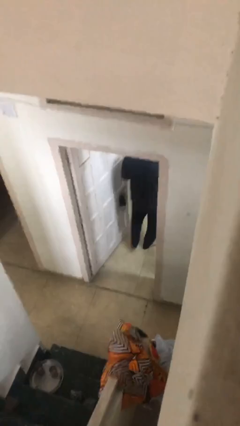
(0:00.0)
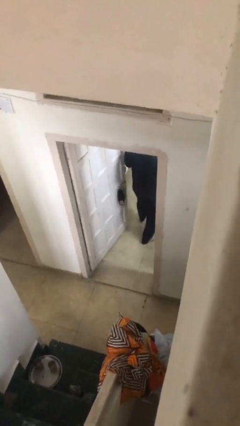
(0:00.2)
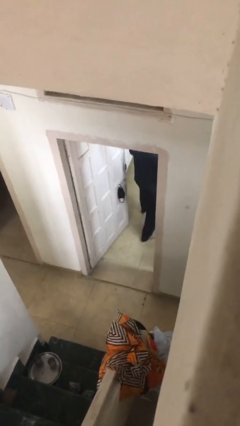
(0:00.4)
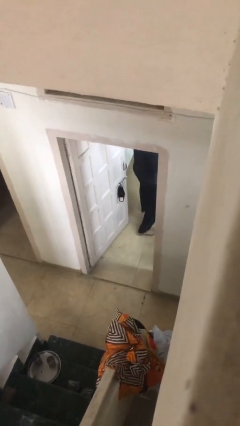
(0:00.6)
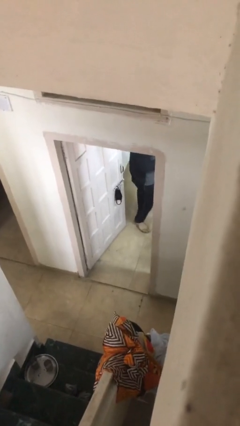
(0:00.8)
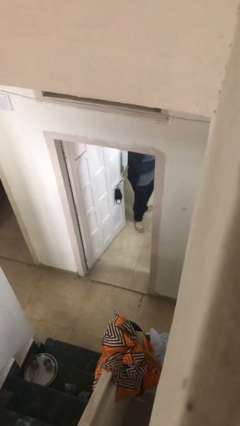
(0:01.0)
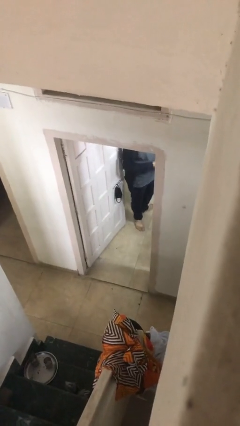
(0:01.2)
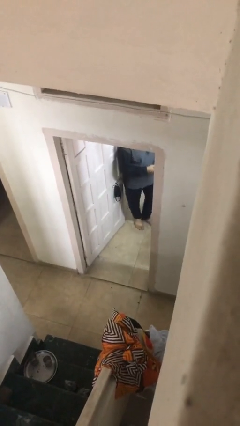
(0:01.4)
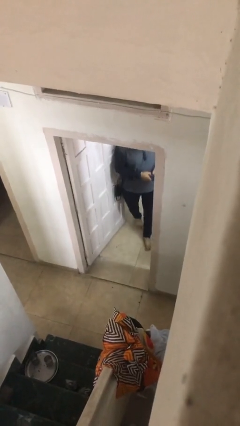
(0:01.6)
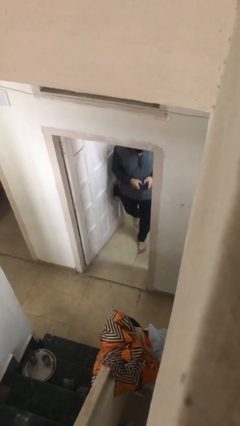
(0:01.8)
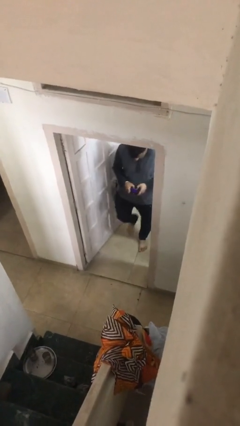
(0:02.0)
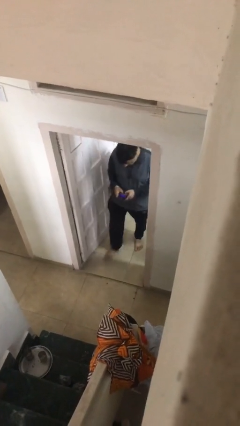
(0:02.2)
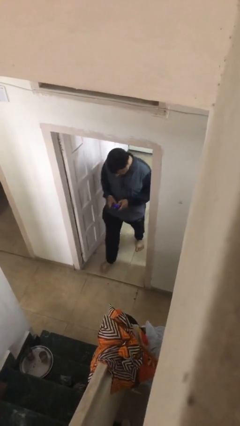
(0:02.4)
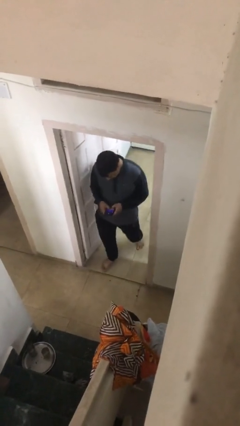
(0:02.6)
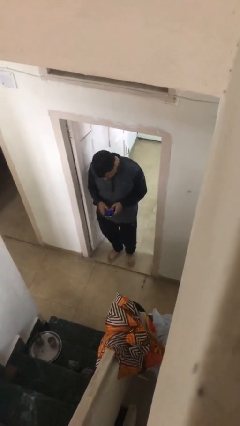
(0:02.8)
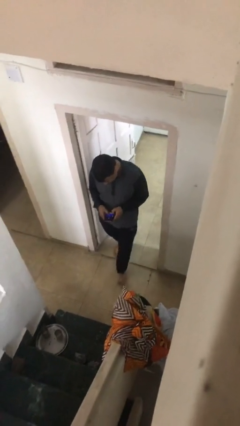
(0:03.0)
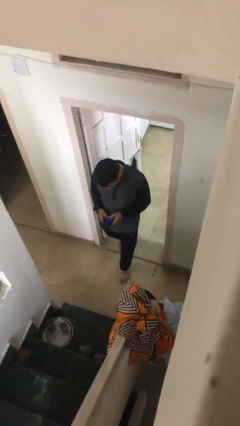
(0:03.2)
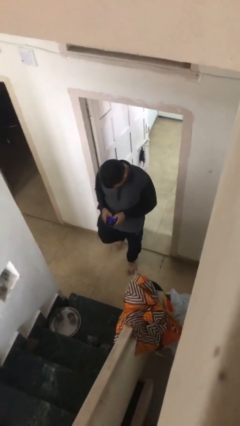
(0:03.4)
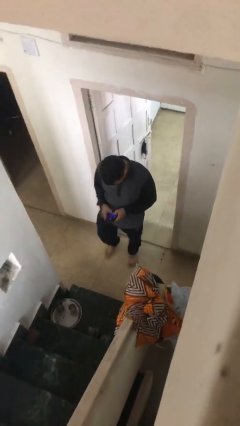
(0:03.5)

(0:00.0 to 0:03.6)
person enters scene through structure

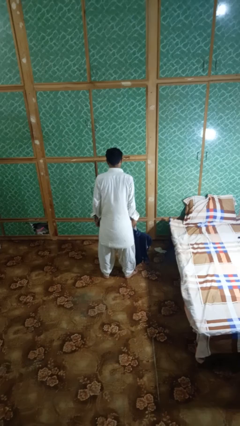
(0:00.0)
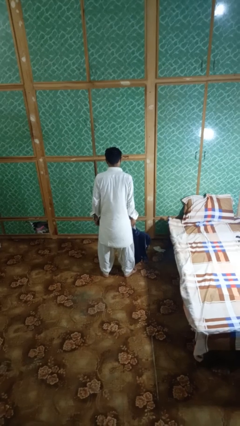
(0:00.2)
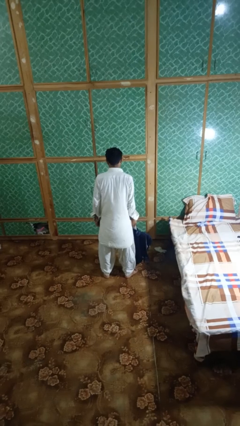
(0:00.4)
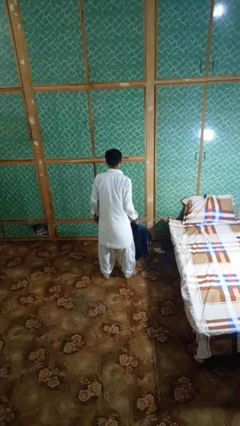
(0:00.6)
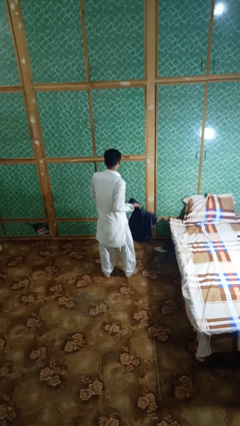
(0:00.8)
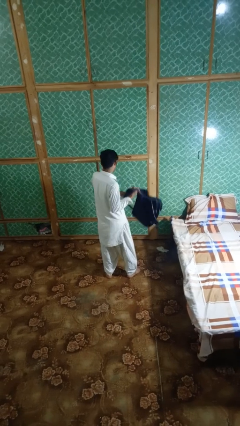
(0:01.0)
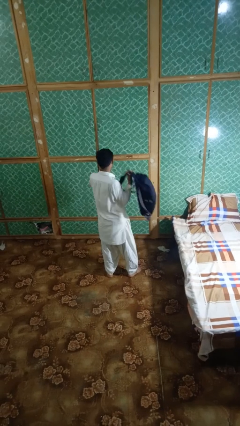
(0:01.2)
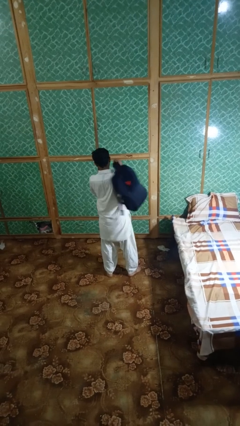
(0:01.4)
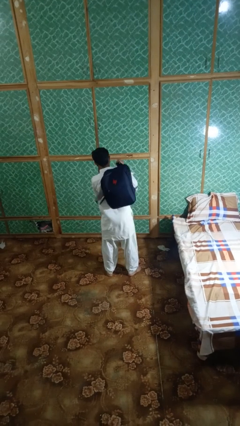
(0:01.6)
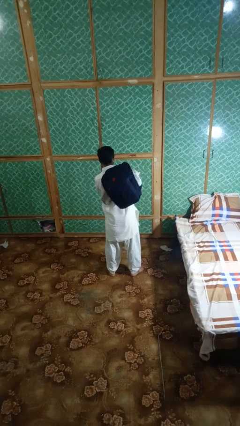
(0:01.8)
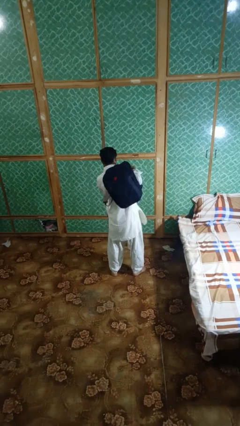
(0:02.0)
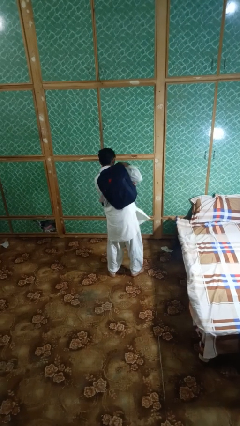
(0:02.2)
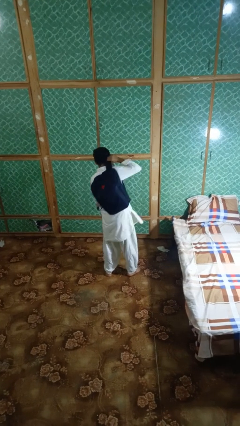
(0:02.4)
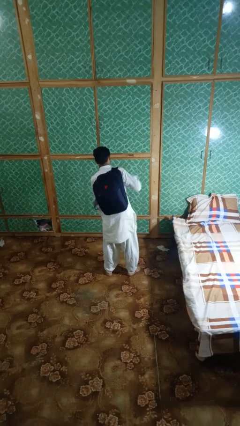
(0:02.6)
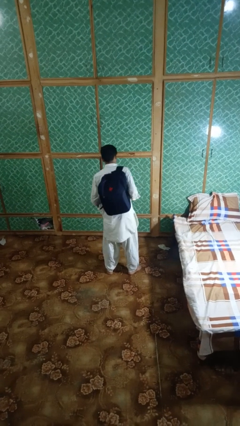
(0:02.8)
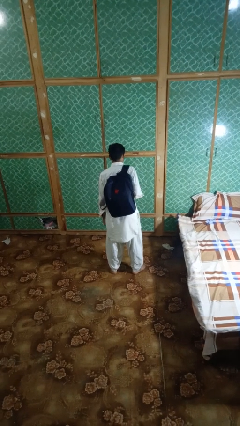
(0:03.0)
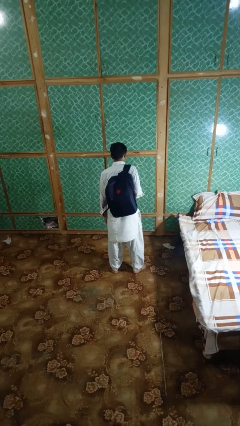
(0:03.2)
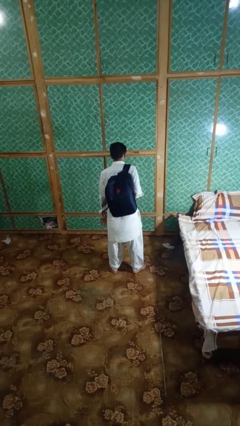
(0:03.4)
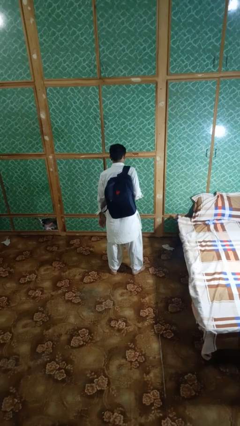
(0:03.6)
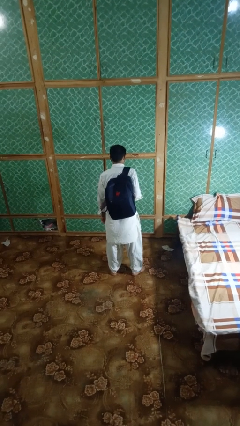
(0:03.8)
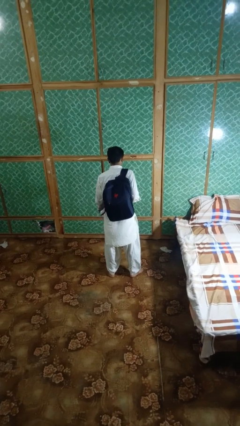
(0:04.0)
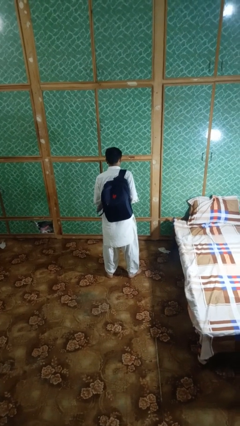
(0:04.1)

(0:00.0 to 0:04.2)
person puts on backpack

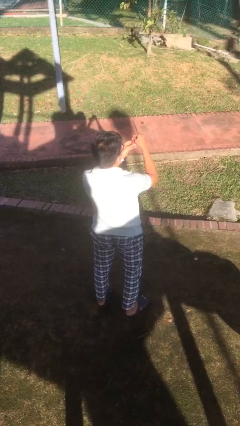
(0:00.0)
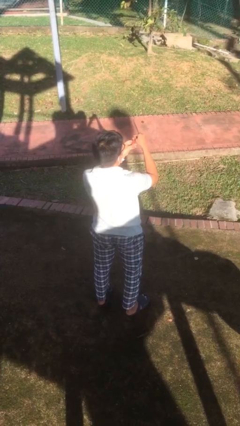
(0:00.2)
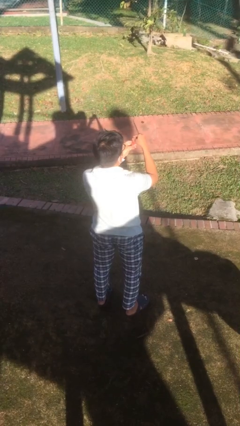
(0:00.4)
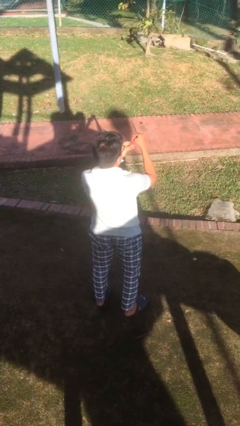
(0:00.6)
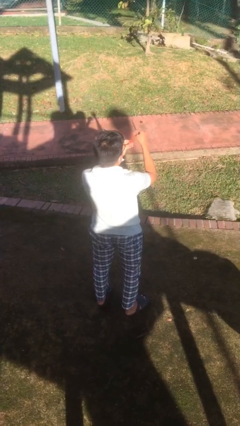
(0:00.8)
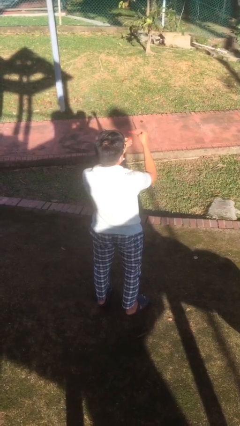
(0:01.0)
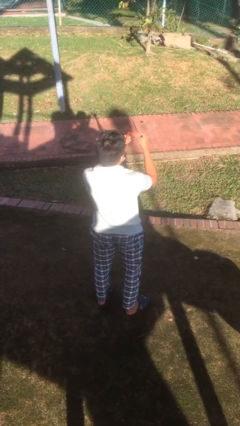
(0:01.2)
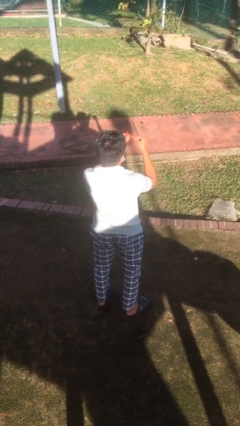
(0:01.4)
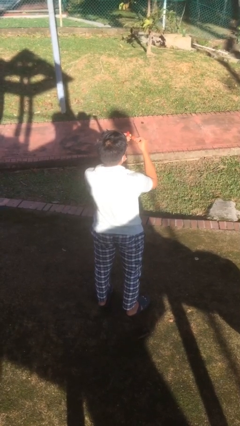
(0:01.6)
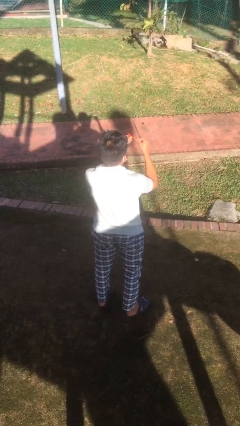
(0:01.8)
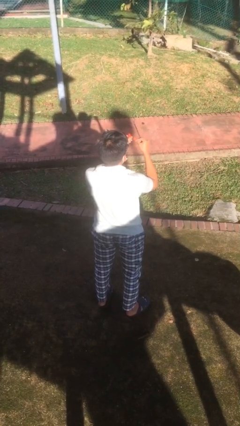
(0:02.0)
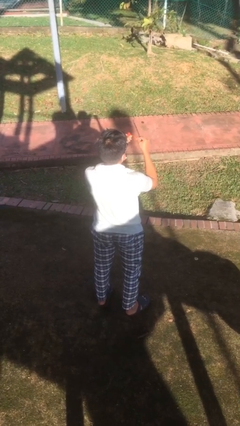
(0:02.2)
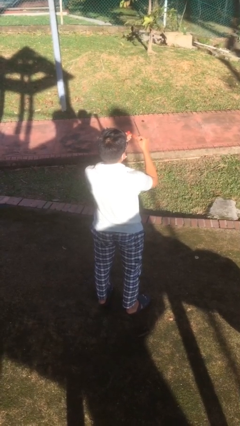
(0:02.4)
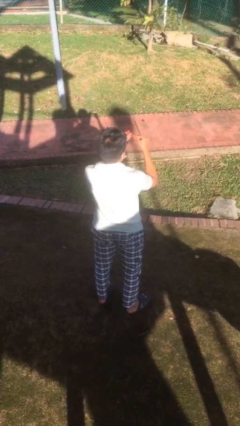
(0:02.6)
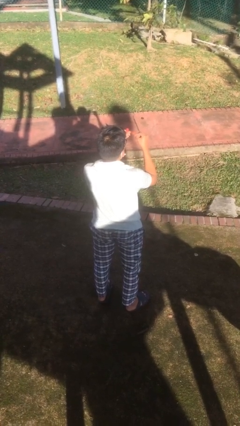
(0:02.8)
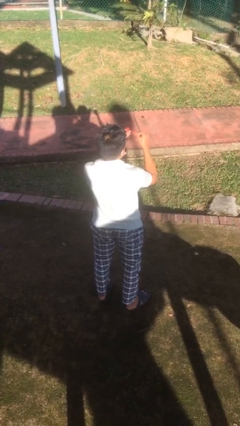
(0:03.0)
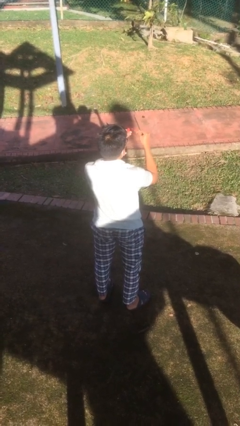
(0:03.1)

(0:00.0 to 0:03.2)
person paints fingernails

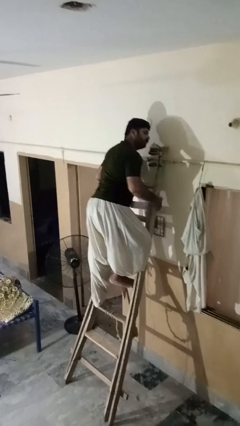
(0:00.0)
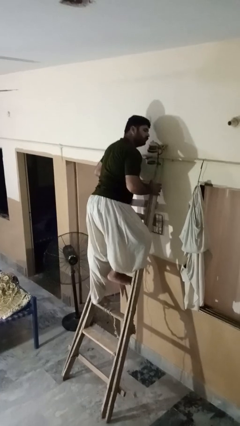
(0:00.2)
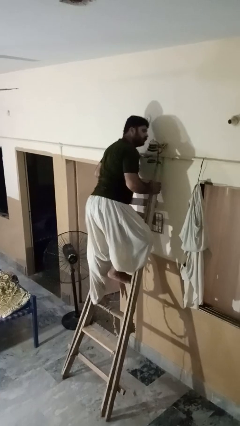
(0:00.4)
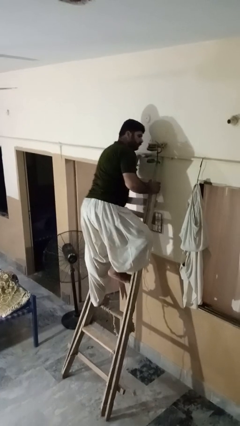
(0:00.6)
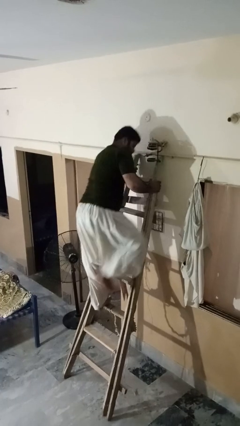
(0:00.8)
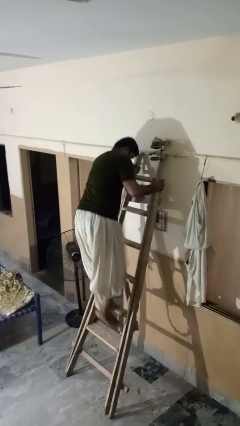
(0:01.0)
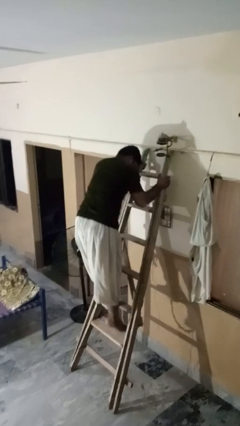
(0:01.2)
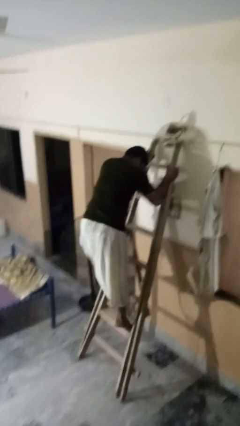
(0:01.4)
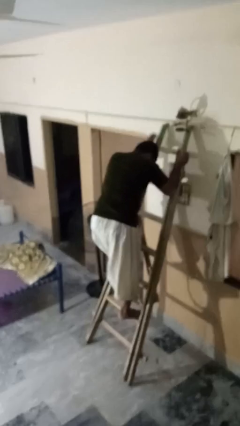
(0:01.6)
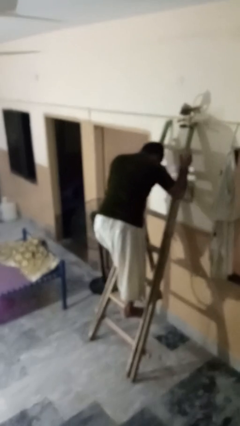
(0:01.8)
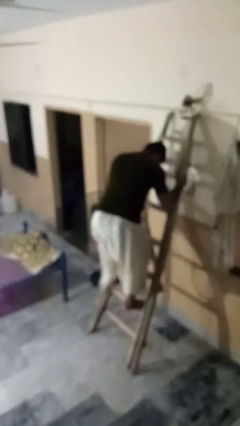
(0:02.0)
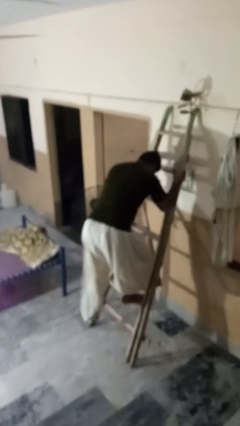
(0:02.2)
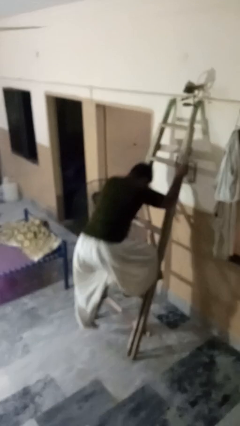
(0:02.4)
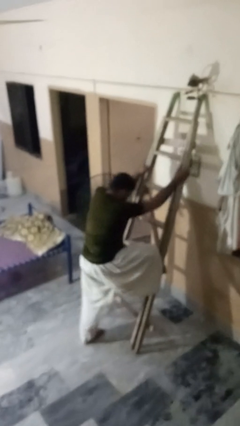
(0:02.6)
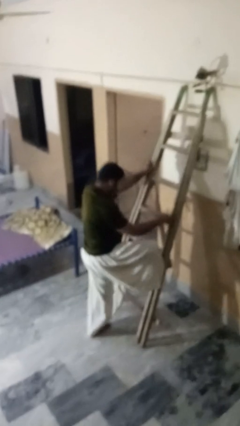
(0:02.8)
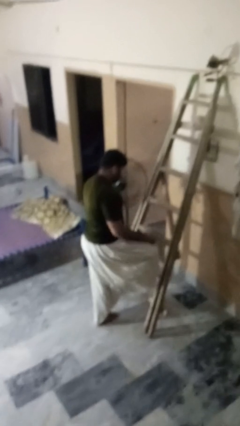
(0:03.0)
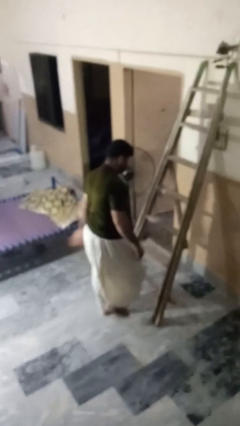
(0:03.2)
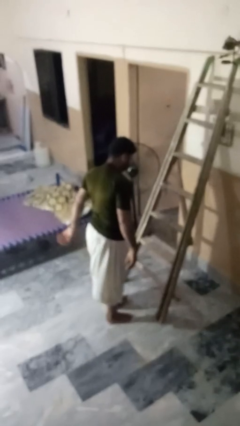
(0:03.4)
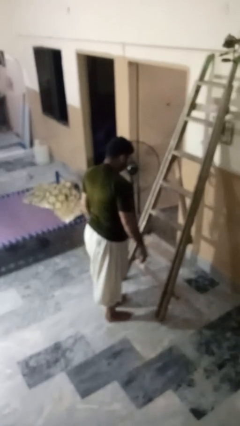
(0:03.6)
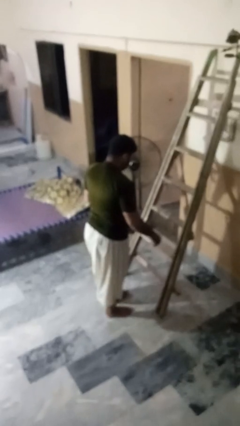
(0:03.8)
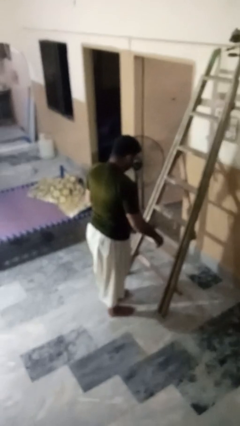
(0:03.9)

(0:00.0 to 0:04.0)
person climbs down ladder

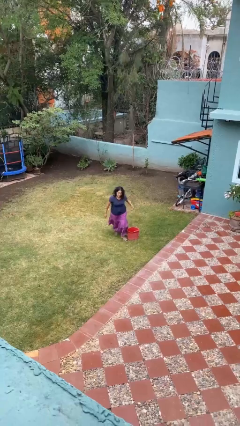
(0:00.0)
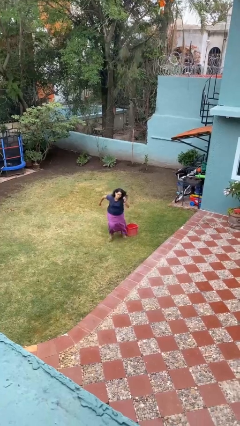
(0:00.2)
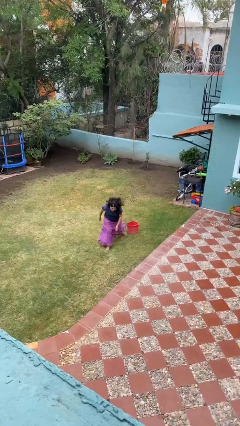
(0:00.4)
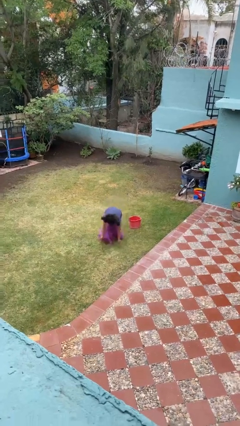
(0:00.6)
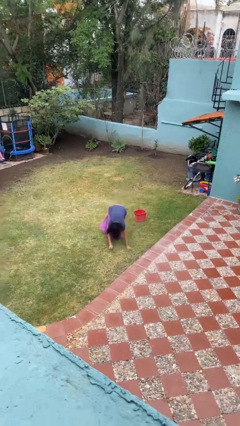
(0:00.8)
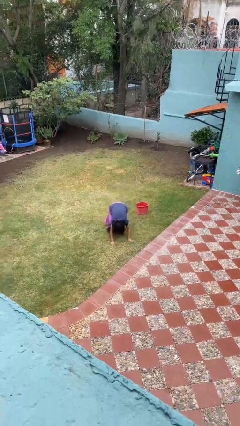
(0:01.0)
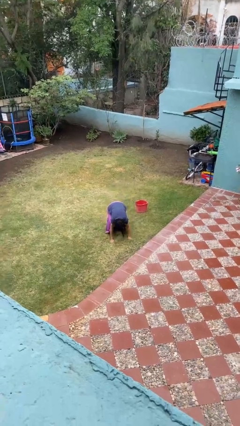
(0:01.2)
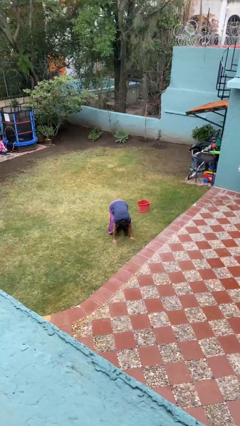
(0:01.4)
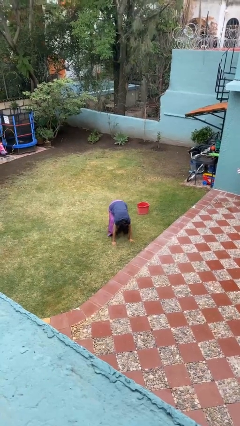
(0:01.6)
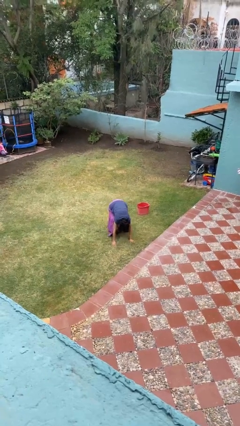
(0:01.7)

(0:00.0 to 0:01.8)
person trips on object on floor

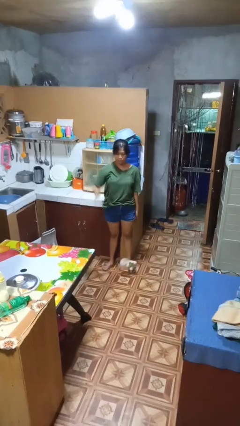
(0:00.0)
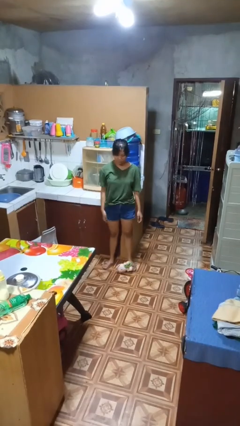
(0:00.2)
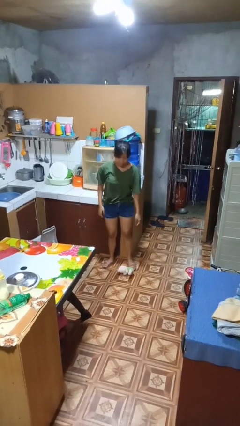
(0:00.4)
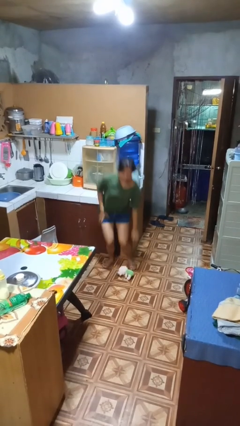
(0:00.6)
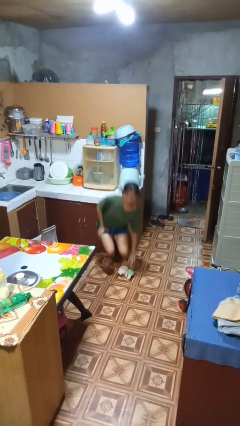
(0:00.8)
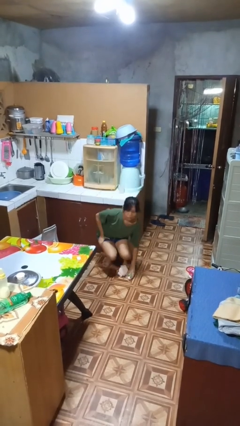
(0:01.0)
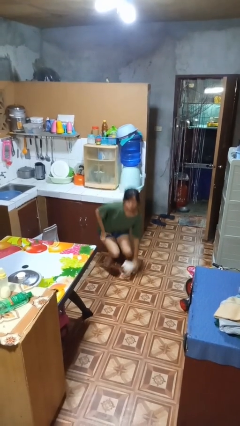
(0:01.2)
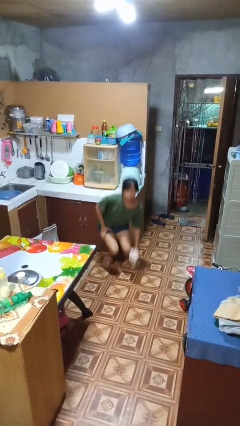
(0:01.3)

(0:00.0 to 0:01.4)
person picks up object from floor
